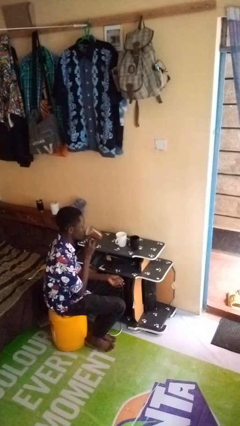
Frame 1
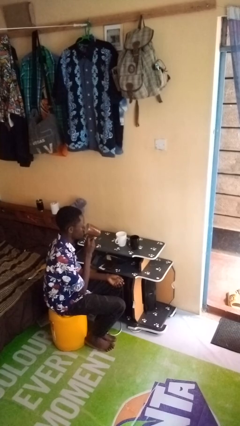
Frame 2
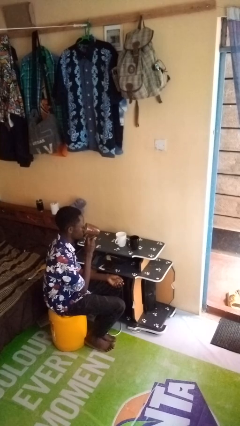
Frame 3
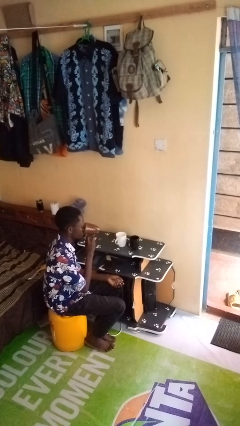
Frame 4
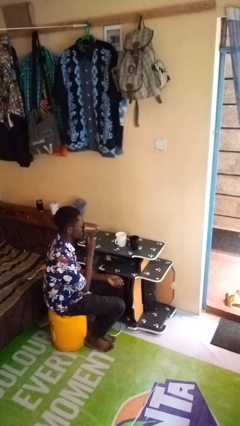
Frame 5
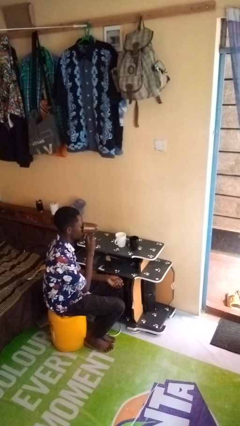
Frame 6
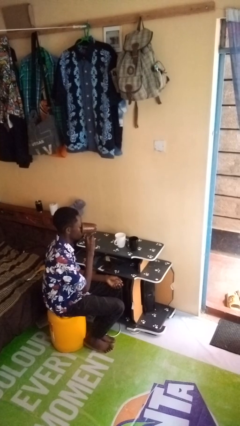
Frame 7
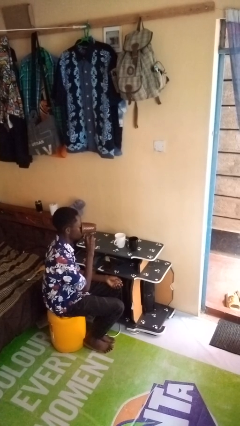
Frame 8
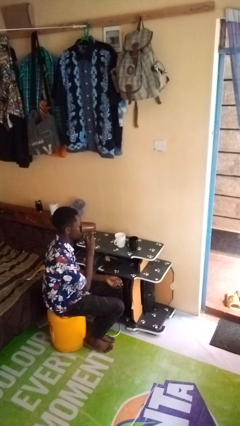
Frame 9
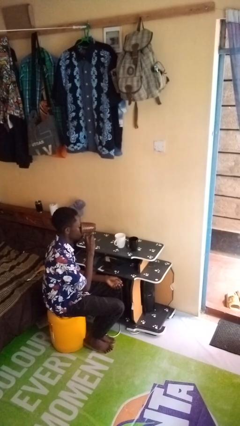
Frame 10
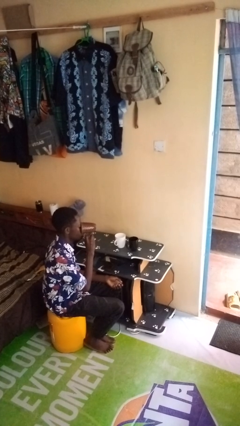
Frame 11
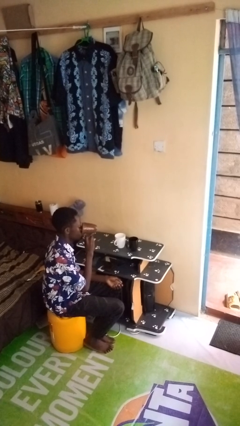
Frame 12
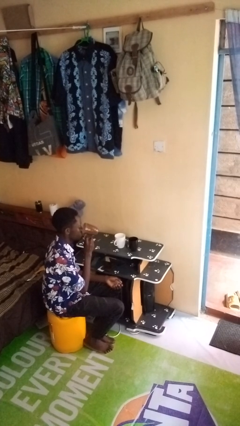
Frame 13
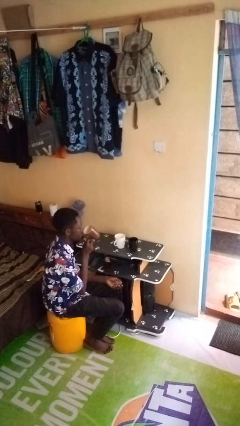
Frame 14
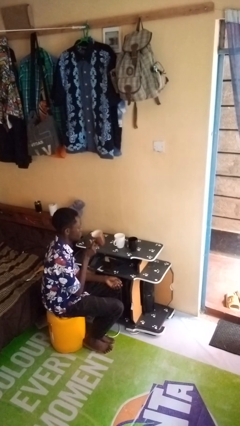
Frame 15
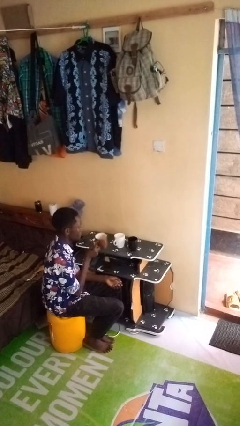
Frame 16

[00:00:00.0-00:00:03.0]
person drinks from shotglass

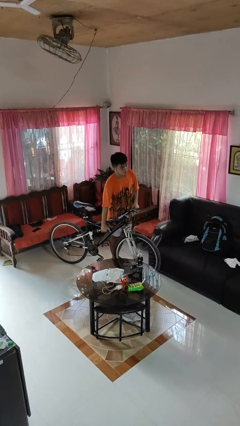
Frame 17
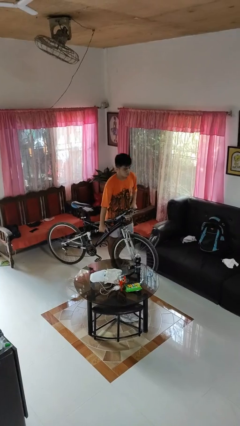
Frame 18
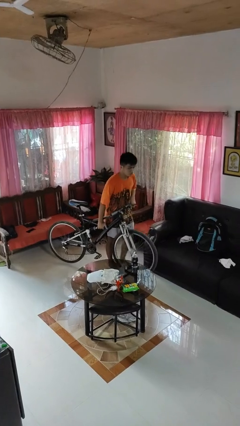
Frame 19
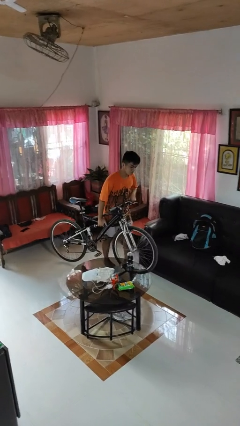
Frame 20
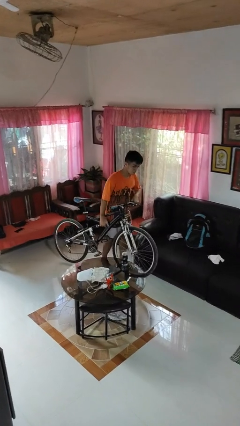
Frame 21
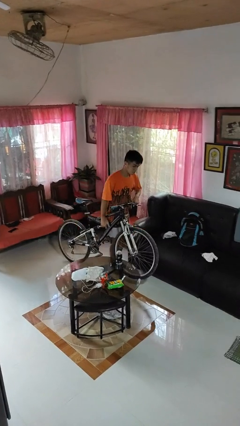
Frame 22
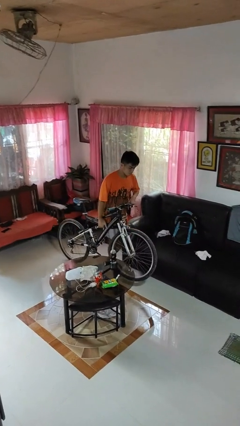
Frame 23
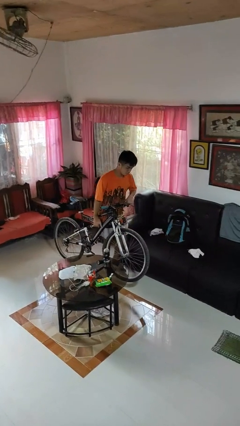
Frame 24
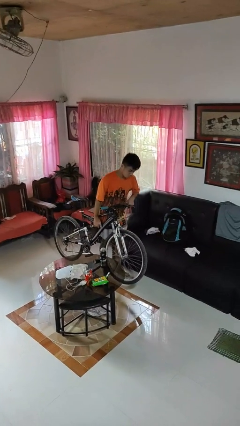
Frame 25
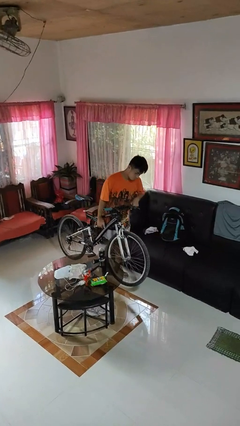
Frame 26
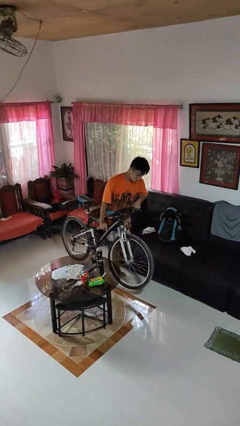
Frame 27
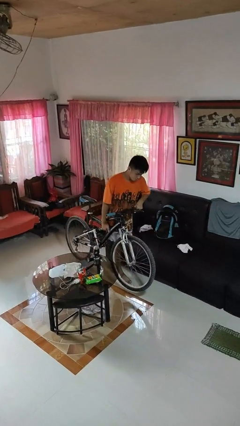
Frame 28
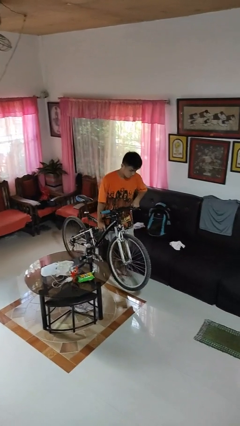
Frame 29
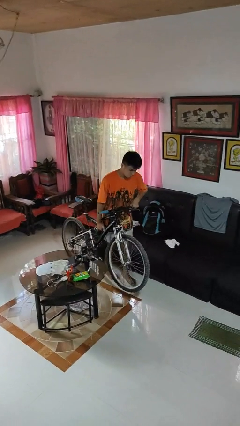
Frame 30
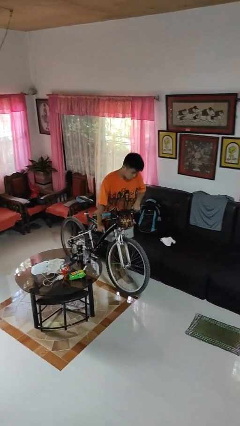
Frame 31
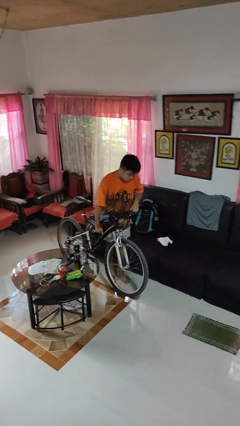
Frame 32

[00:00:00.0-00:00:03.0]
person carries bicycle

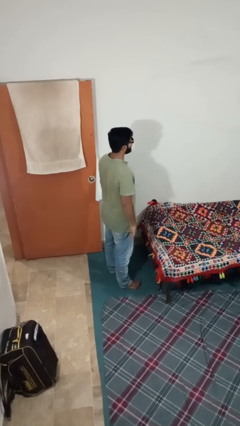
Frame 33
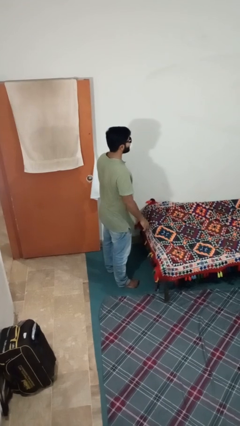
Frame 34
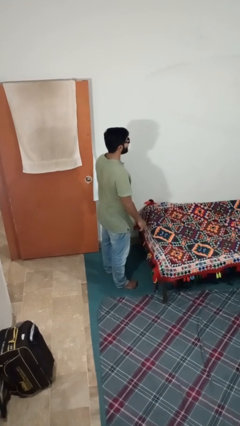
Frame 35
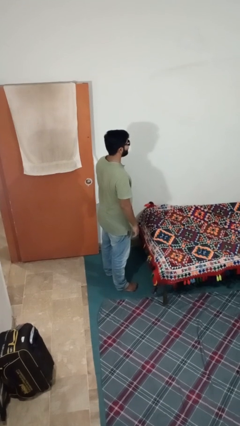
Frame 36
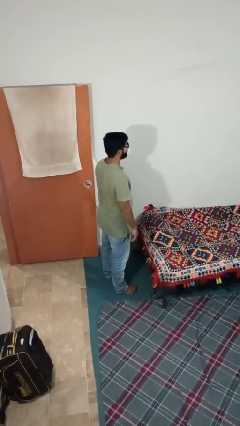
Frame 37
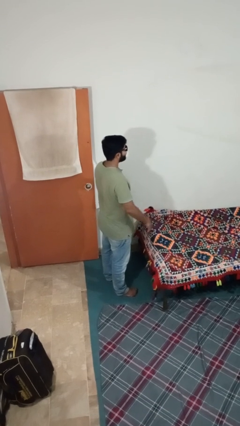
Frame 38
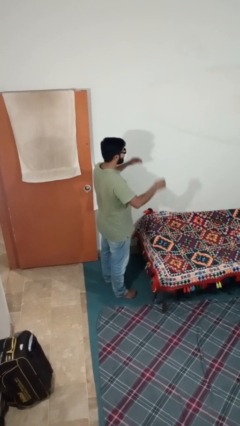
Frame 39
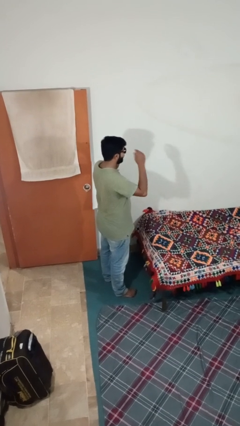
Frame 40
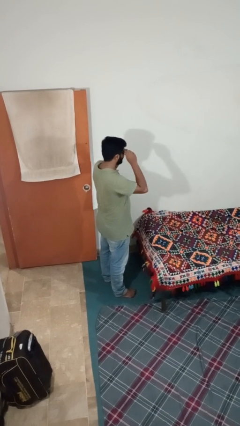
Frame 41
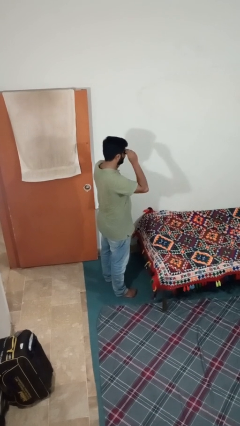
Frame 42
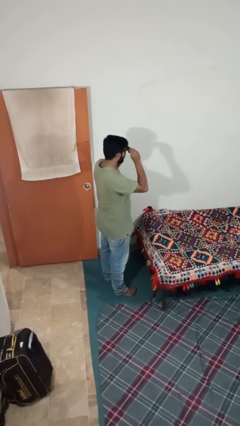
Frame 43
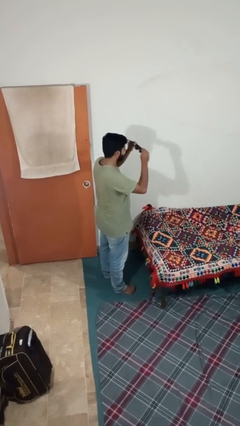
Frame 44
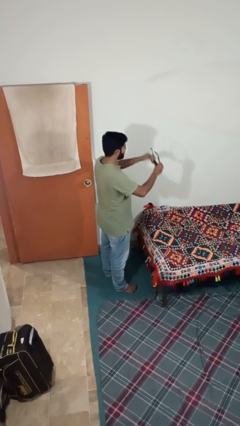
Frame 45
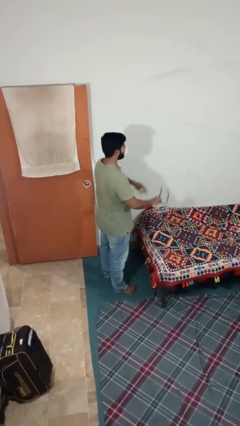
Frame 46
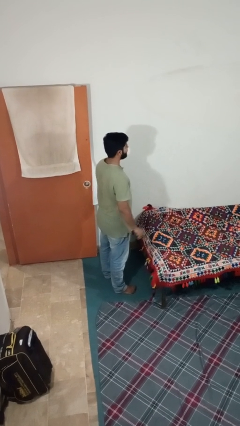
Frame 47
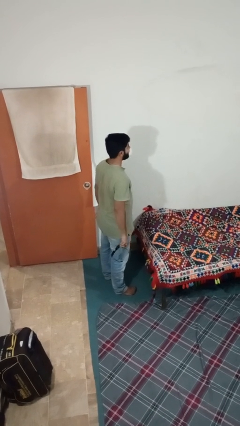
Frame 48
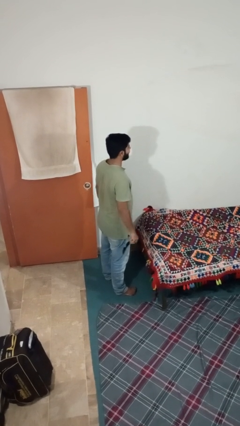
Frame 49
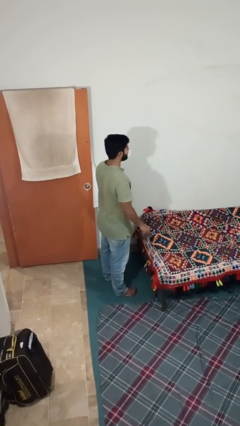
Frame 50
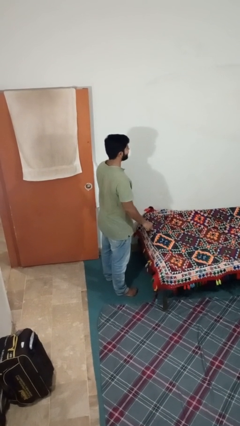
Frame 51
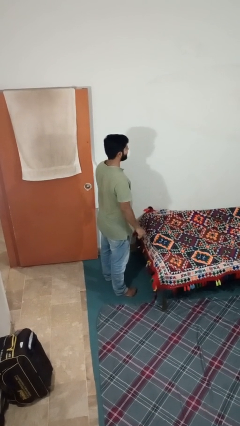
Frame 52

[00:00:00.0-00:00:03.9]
person takes off sunglasses

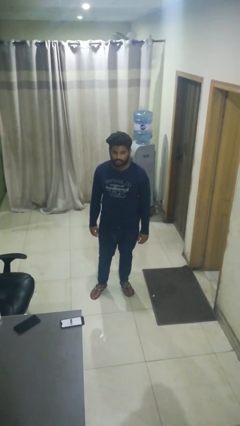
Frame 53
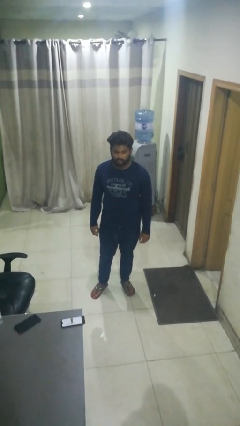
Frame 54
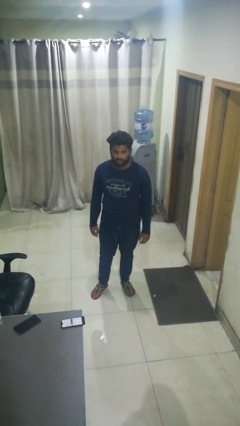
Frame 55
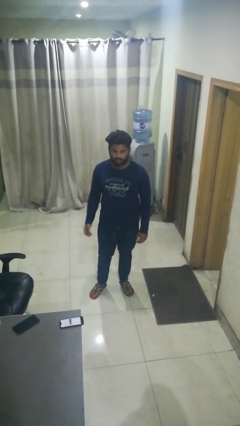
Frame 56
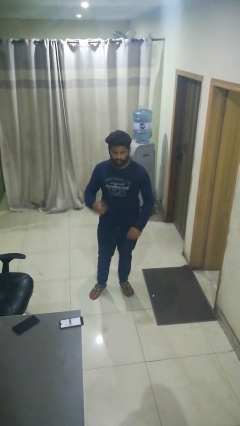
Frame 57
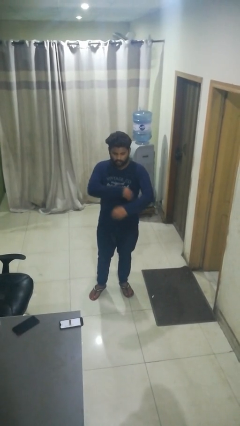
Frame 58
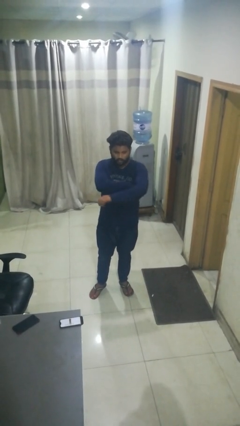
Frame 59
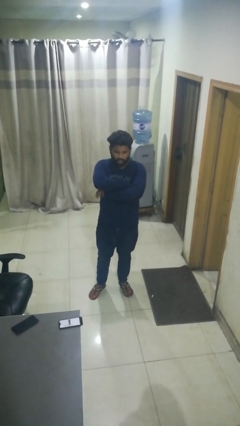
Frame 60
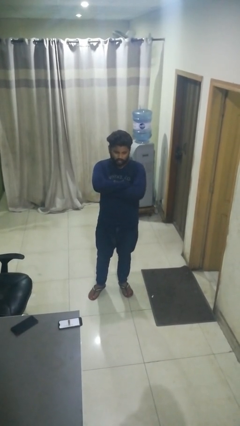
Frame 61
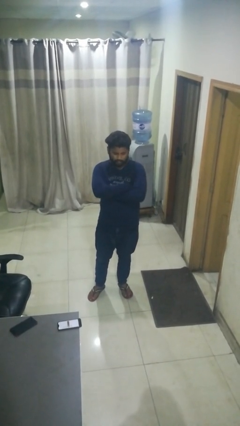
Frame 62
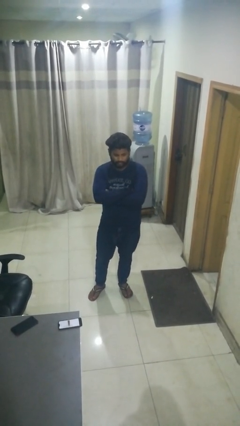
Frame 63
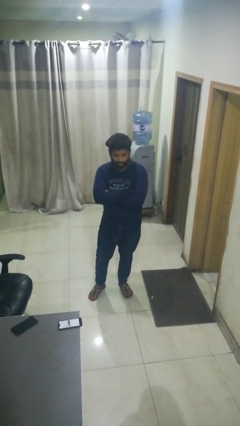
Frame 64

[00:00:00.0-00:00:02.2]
person crosses arms

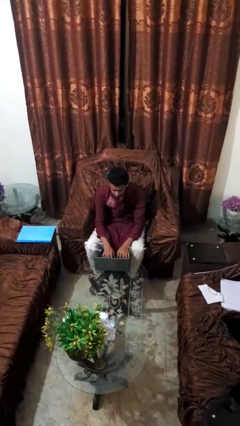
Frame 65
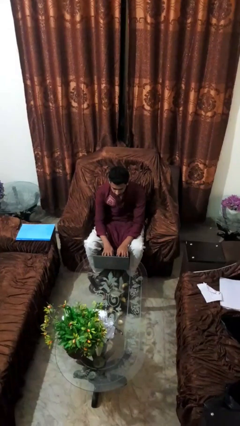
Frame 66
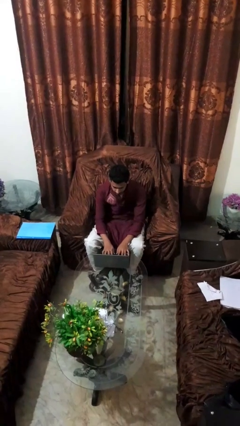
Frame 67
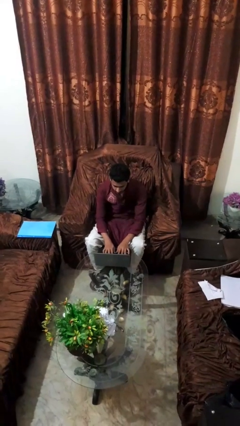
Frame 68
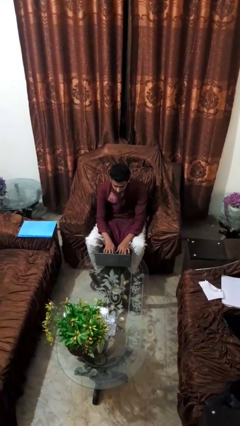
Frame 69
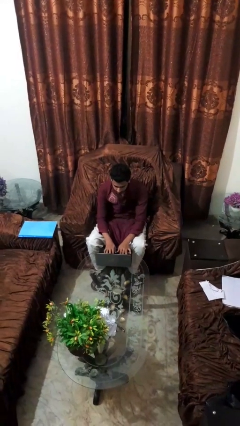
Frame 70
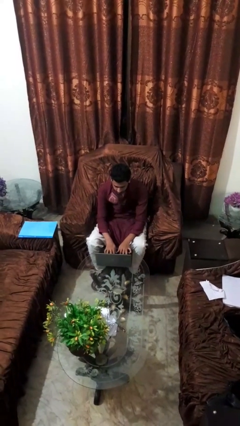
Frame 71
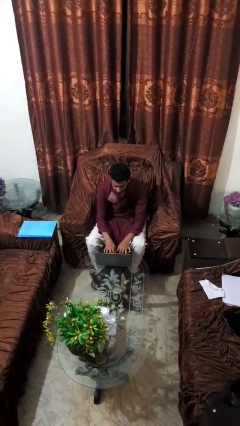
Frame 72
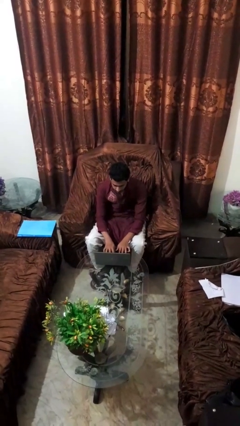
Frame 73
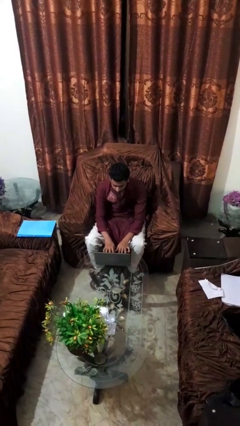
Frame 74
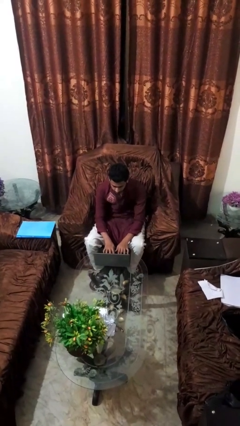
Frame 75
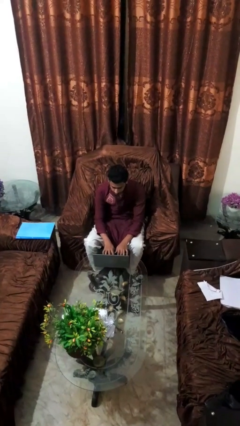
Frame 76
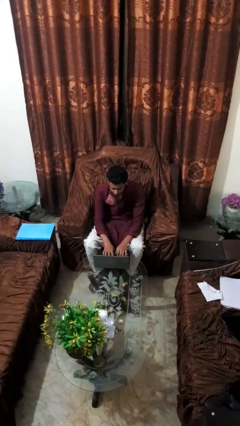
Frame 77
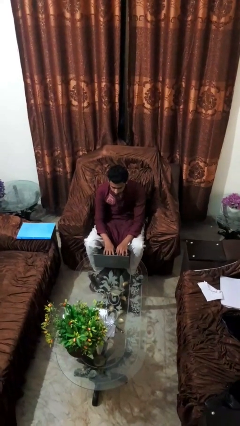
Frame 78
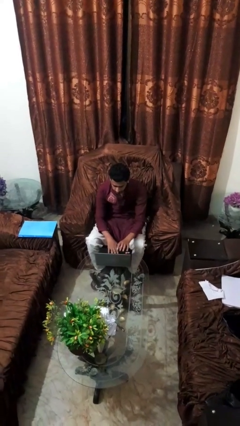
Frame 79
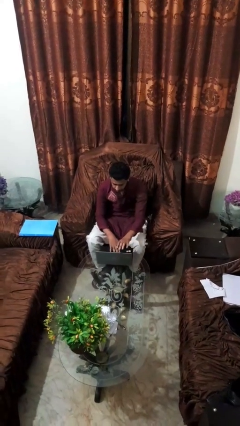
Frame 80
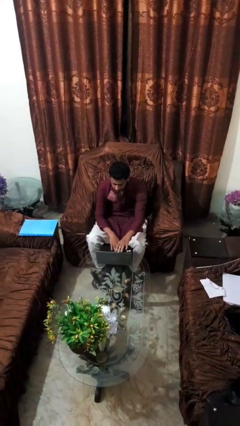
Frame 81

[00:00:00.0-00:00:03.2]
person interacts with laptop

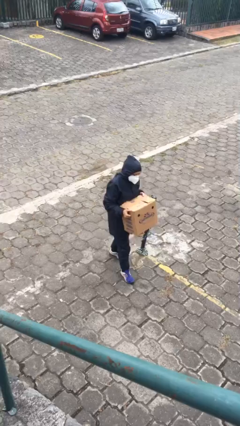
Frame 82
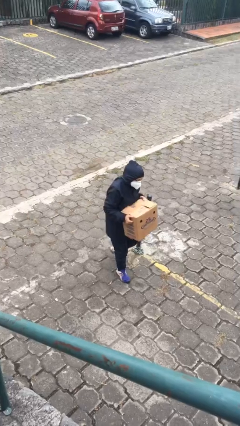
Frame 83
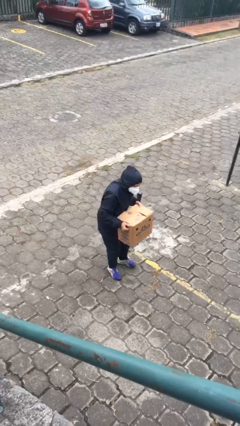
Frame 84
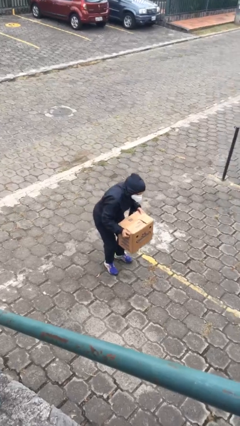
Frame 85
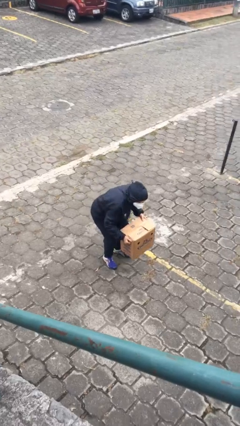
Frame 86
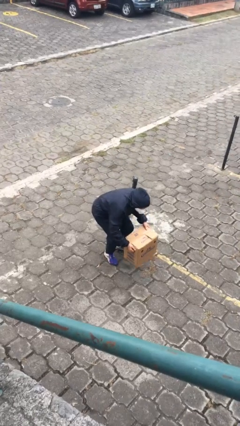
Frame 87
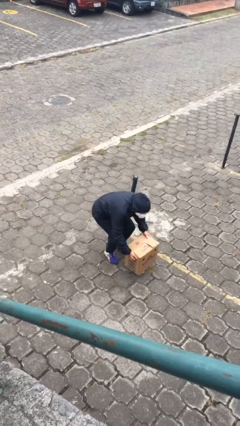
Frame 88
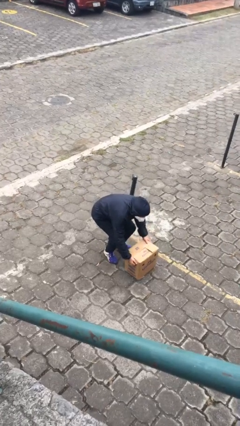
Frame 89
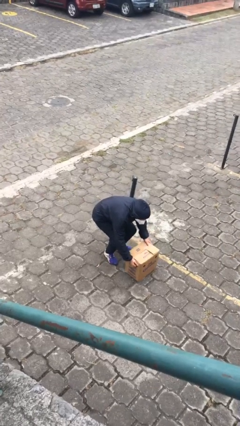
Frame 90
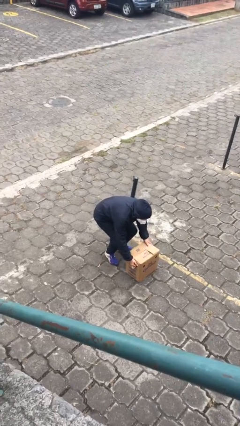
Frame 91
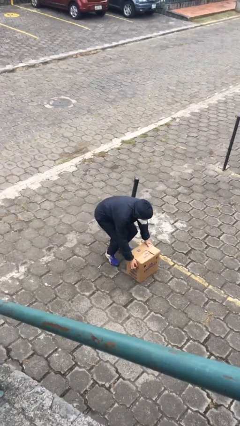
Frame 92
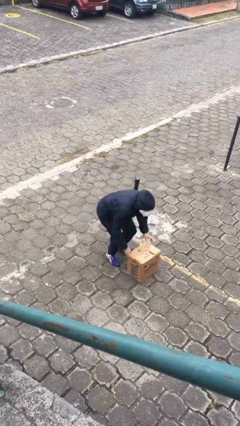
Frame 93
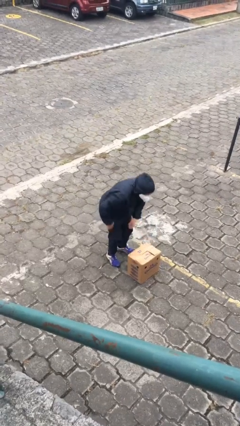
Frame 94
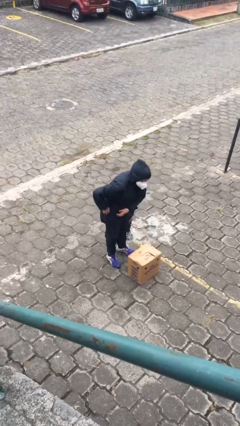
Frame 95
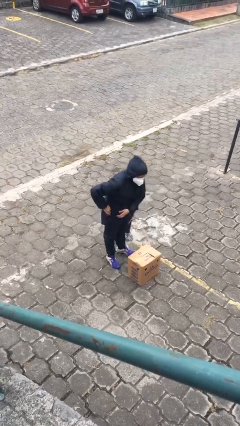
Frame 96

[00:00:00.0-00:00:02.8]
person puts down object on floor
